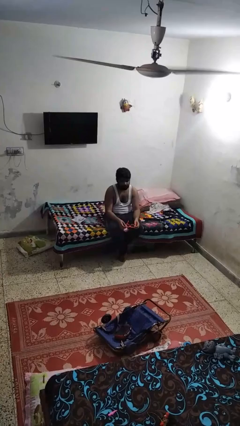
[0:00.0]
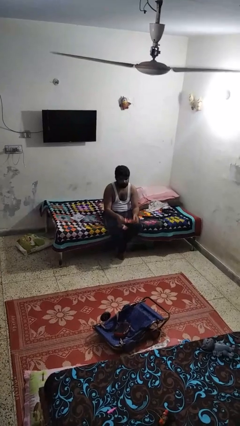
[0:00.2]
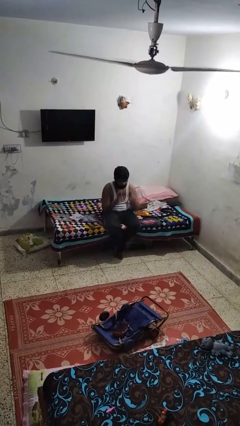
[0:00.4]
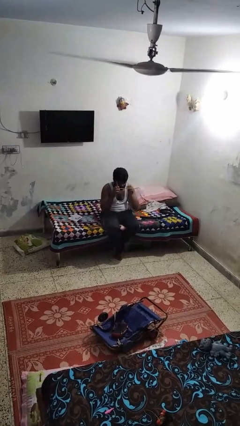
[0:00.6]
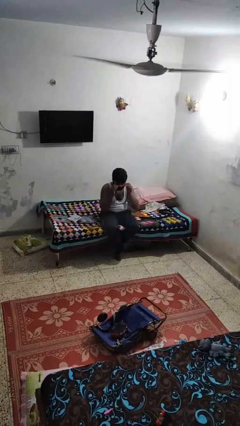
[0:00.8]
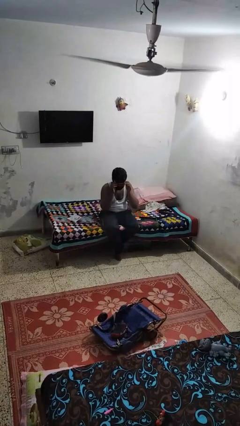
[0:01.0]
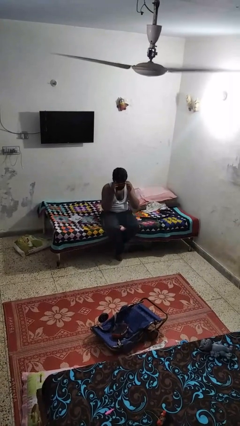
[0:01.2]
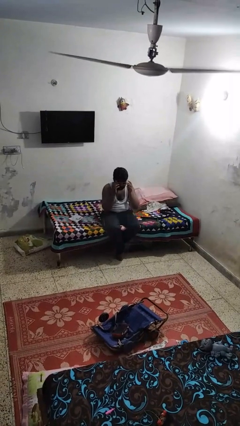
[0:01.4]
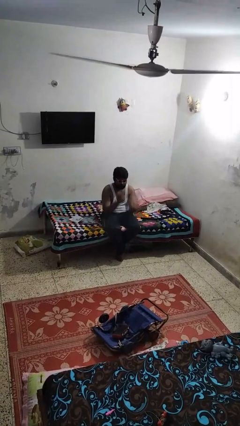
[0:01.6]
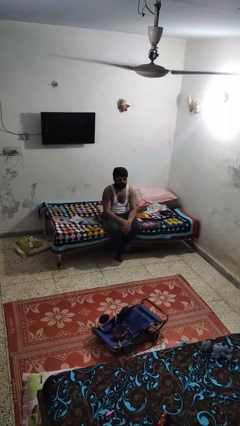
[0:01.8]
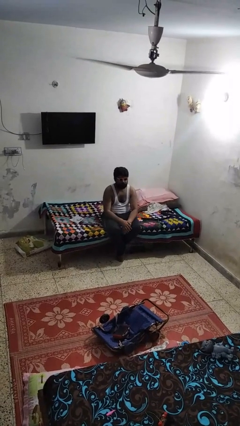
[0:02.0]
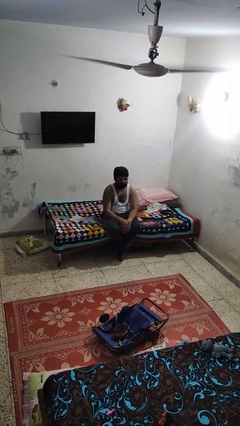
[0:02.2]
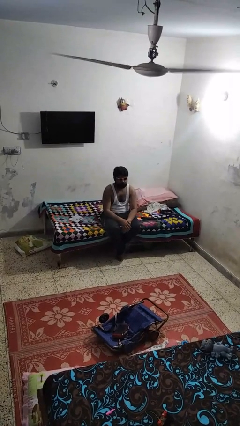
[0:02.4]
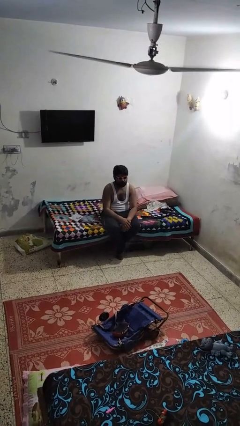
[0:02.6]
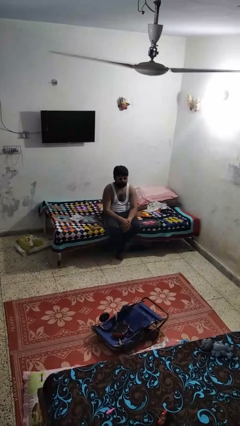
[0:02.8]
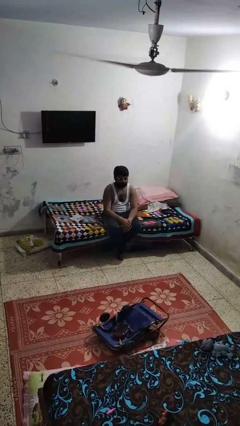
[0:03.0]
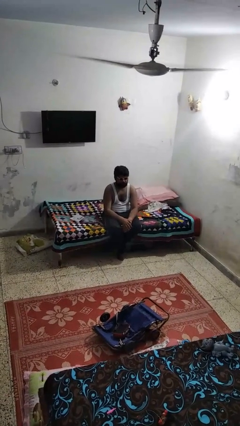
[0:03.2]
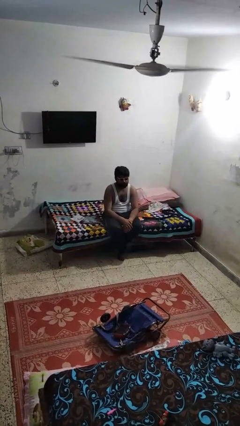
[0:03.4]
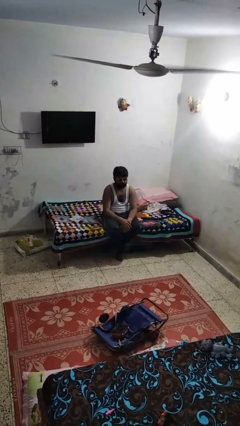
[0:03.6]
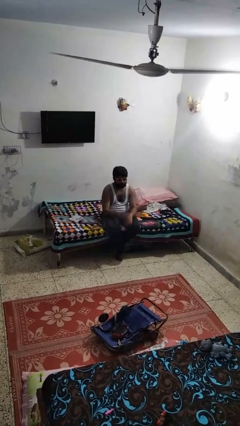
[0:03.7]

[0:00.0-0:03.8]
person puts on sunglasses

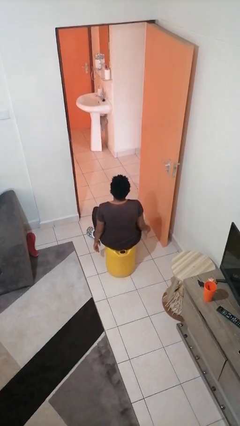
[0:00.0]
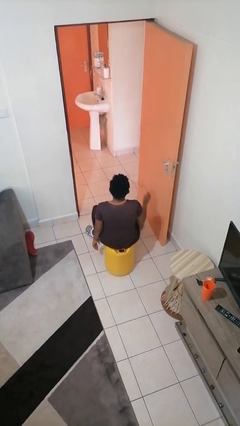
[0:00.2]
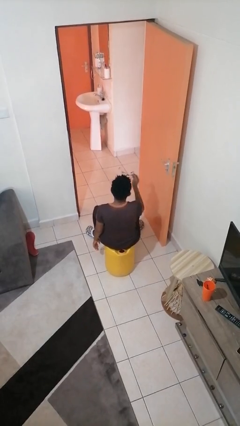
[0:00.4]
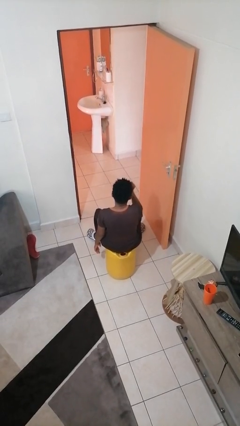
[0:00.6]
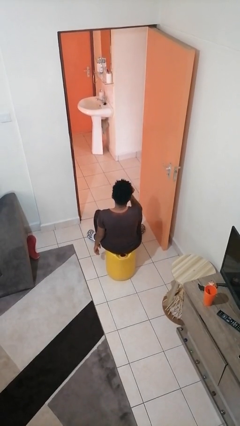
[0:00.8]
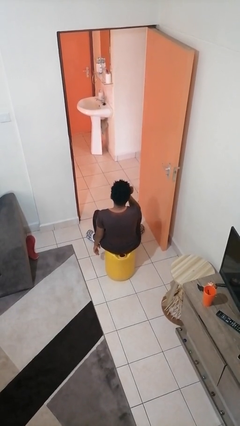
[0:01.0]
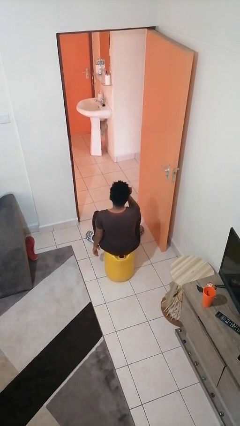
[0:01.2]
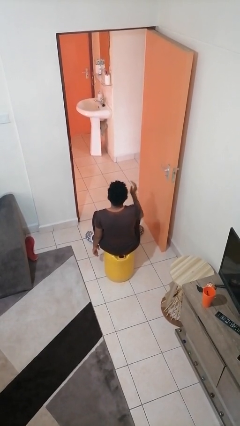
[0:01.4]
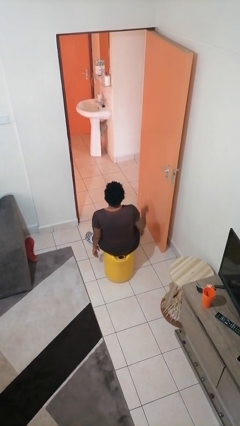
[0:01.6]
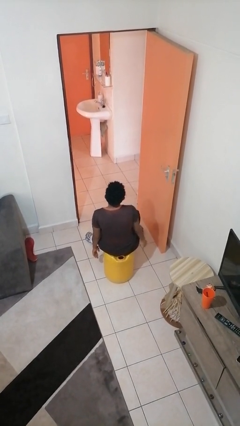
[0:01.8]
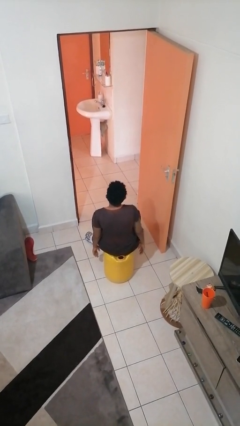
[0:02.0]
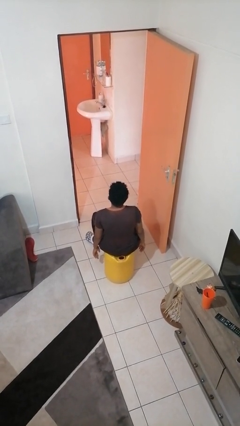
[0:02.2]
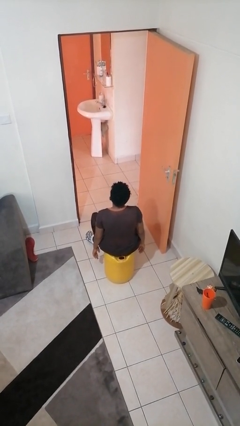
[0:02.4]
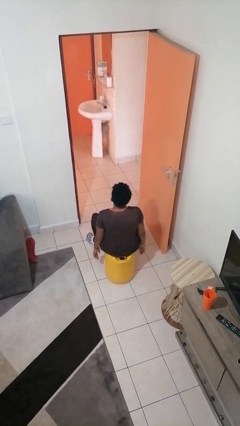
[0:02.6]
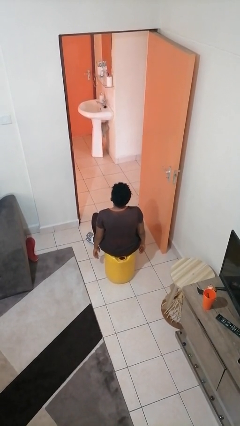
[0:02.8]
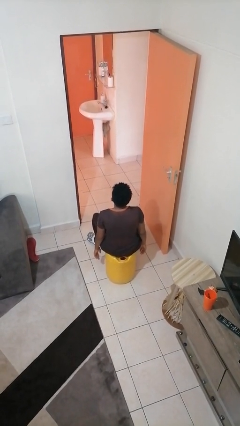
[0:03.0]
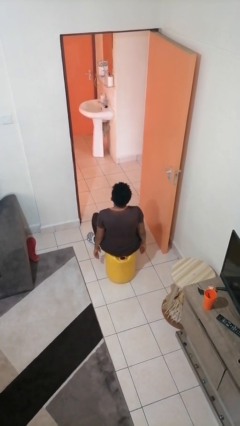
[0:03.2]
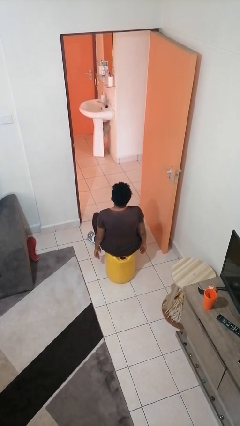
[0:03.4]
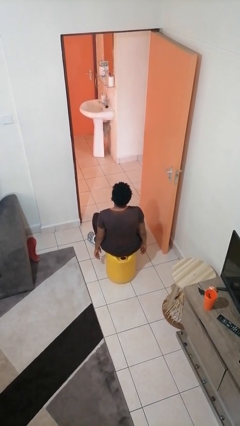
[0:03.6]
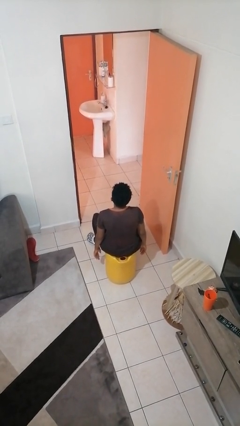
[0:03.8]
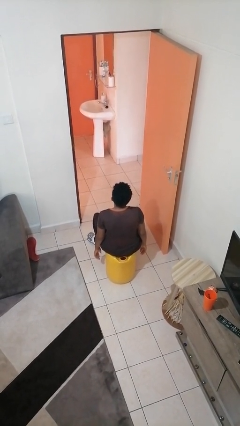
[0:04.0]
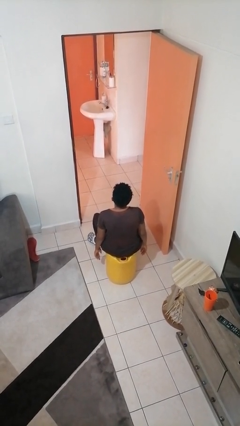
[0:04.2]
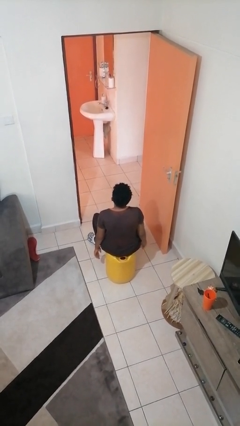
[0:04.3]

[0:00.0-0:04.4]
person puts on glasses

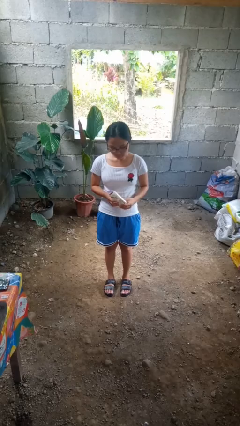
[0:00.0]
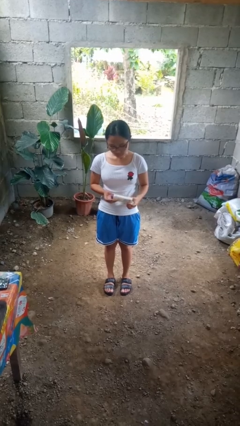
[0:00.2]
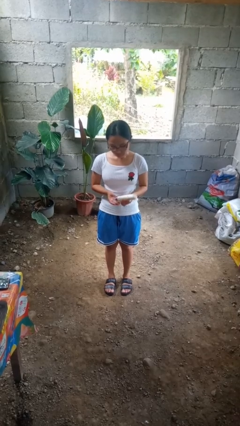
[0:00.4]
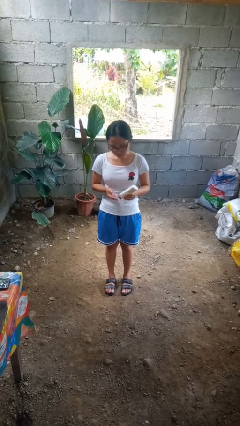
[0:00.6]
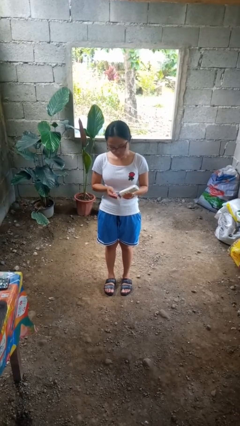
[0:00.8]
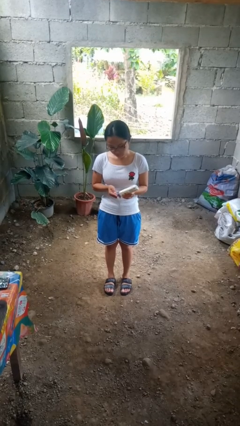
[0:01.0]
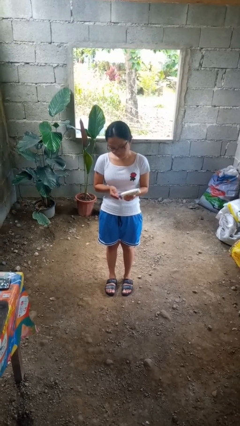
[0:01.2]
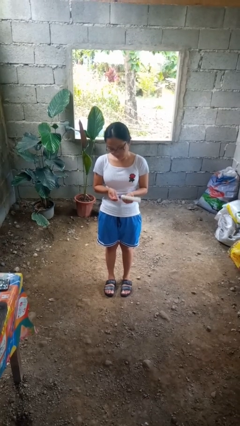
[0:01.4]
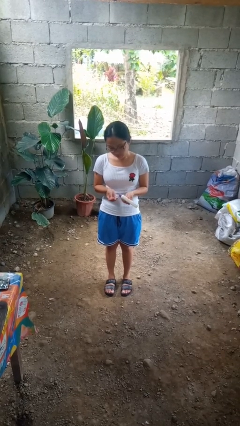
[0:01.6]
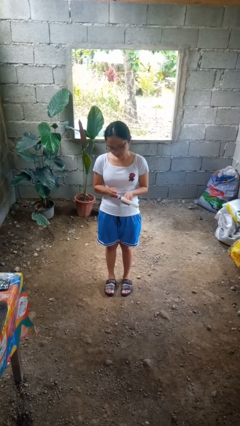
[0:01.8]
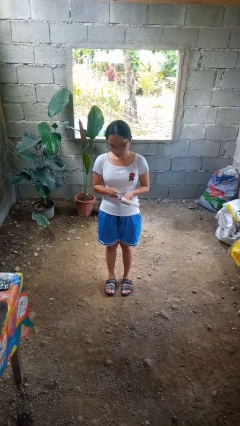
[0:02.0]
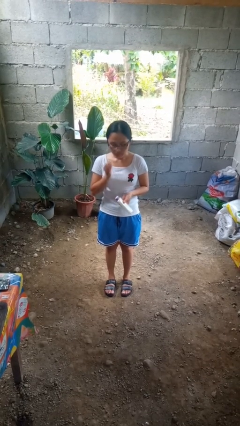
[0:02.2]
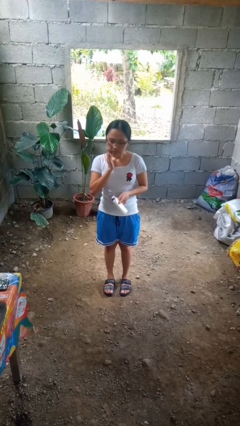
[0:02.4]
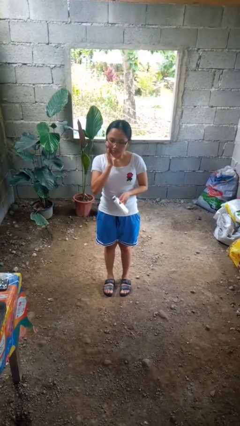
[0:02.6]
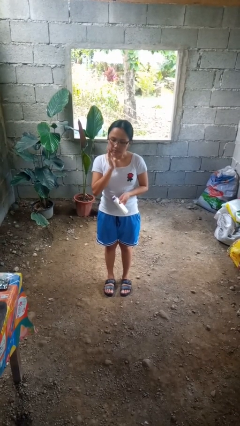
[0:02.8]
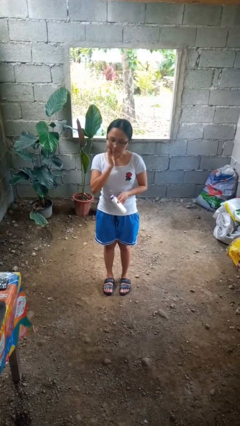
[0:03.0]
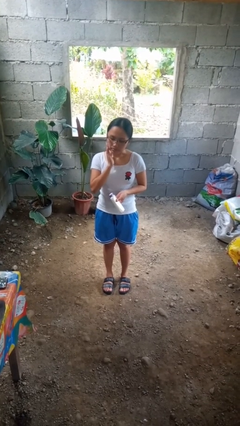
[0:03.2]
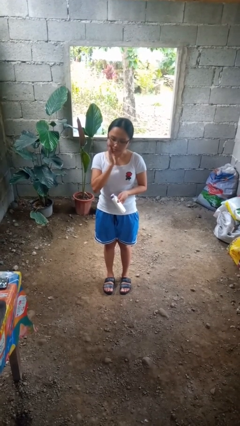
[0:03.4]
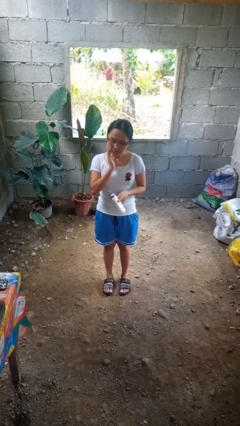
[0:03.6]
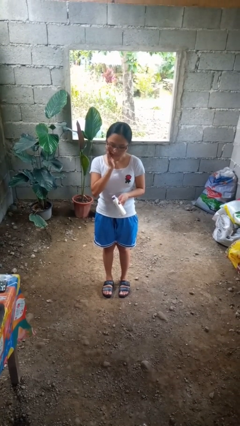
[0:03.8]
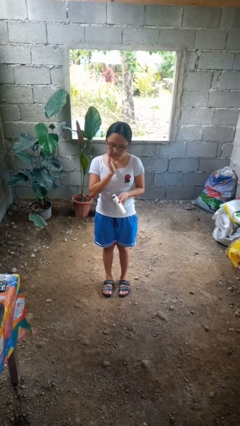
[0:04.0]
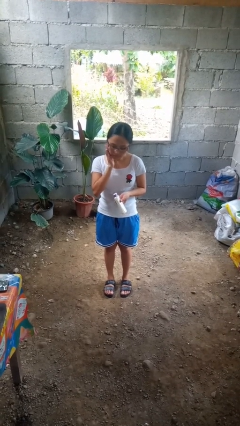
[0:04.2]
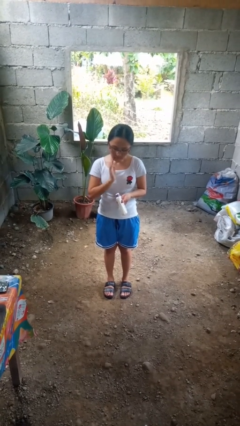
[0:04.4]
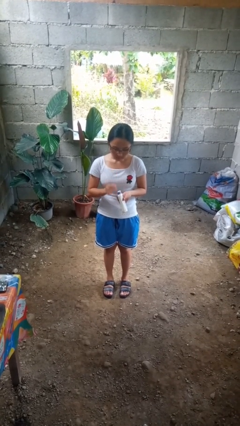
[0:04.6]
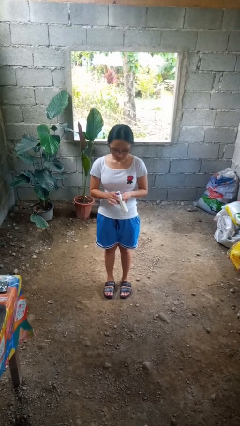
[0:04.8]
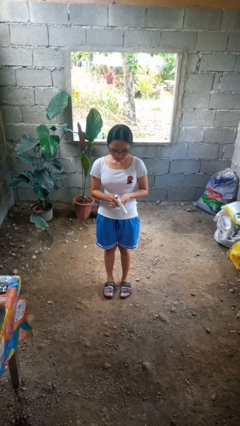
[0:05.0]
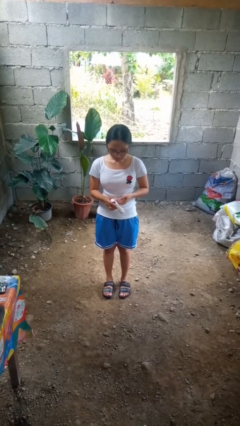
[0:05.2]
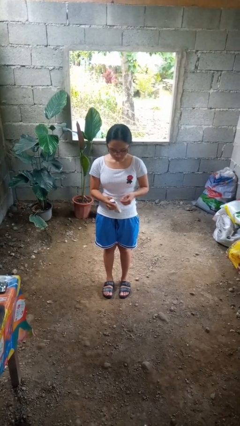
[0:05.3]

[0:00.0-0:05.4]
person applies sunscreen

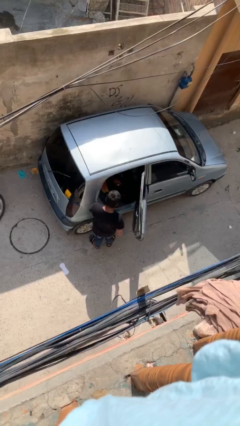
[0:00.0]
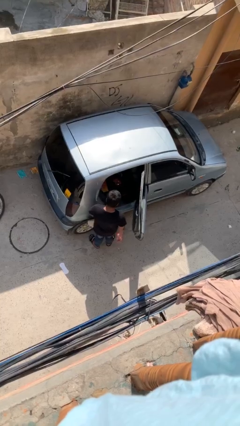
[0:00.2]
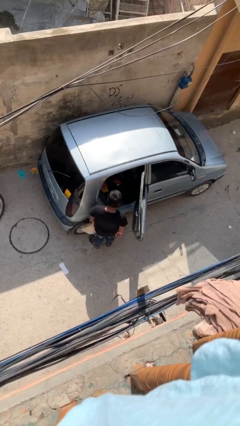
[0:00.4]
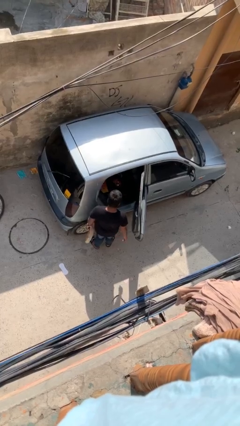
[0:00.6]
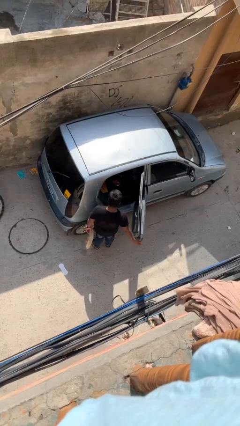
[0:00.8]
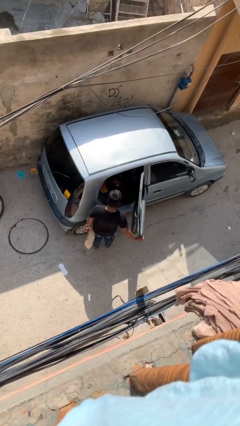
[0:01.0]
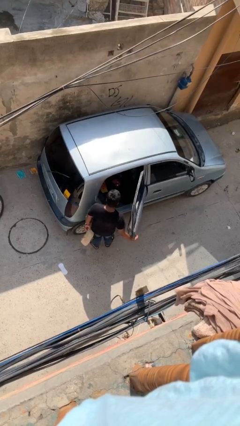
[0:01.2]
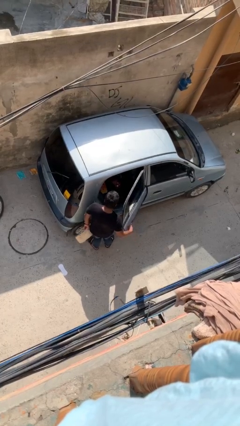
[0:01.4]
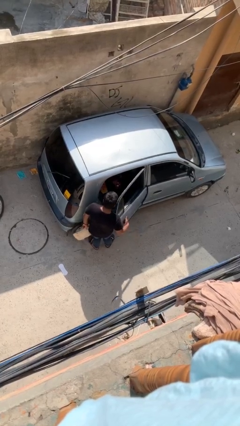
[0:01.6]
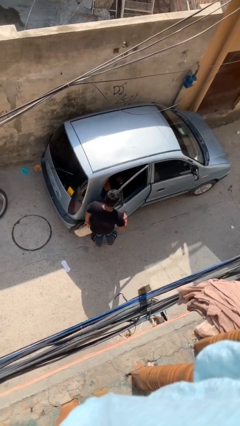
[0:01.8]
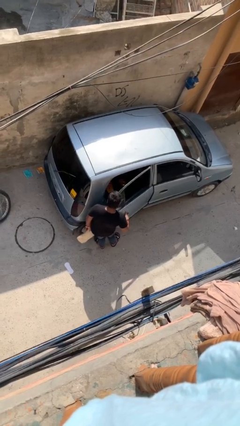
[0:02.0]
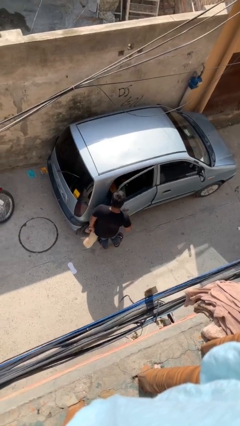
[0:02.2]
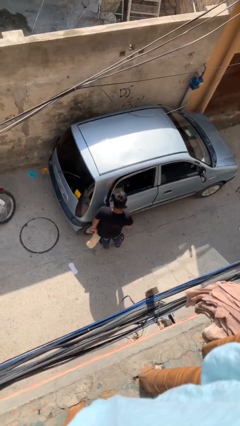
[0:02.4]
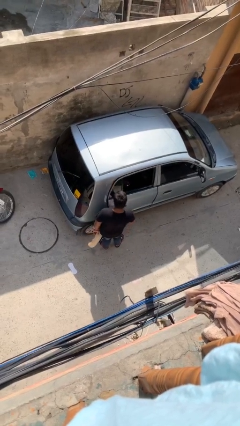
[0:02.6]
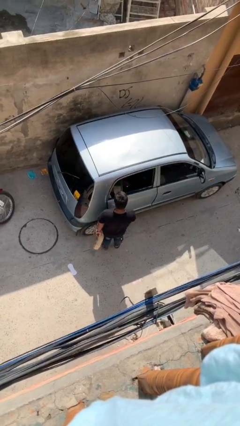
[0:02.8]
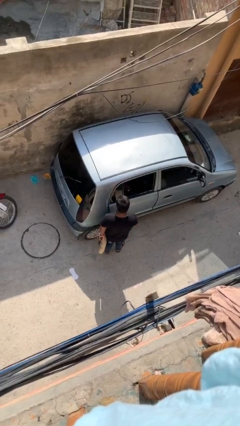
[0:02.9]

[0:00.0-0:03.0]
person closes car door

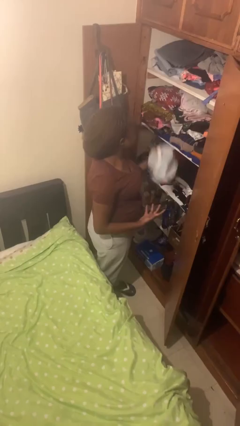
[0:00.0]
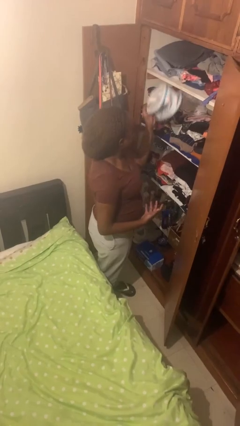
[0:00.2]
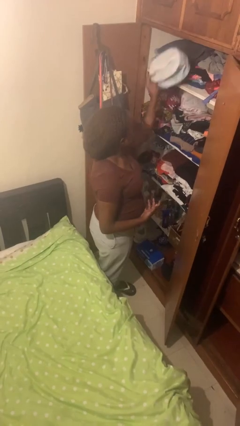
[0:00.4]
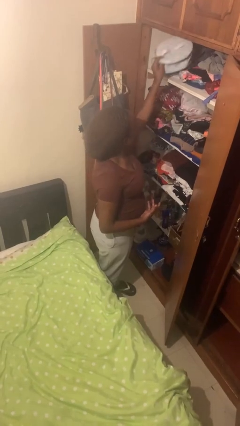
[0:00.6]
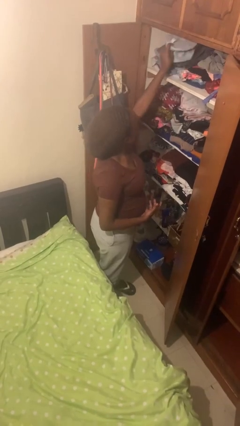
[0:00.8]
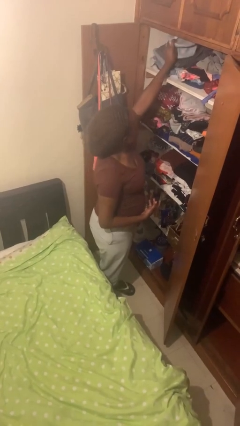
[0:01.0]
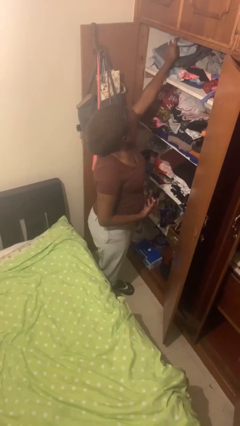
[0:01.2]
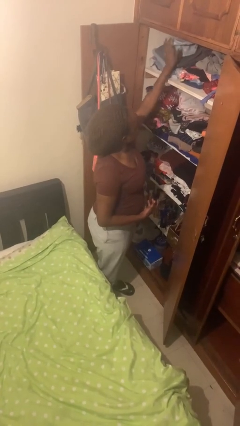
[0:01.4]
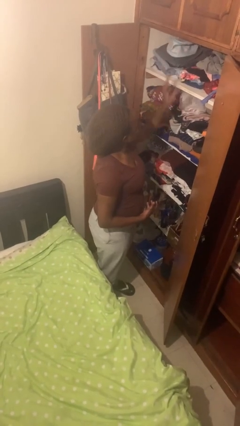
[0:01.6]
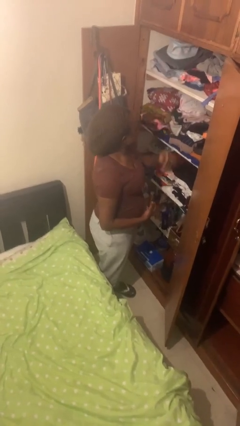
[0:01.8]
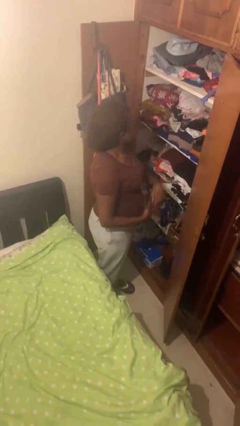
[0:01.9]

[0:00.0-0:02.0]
person puts down object on shelf
